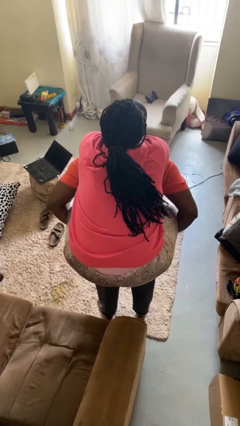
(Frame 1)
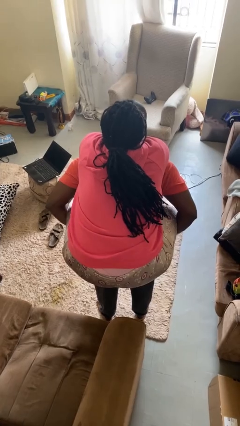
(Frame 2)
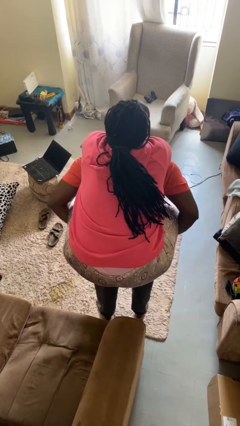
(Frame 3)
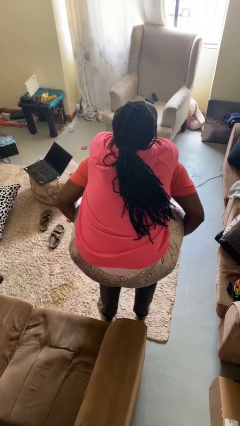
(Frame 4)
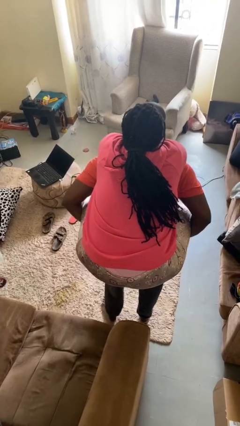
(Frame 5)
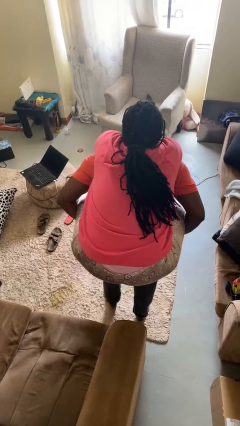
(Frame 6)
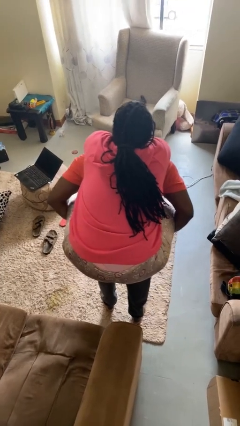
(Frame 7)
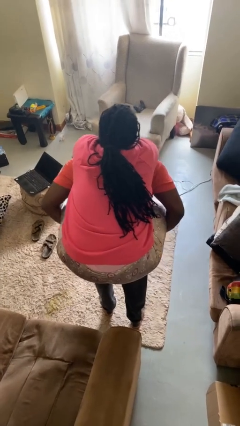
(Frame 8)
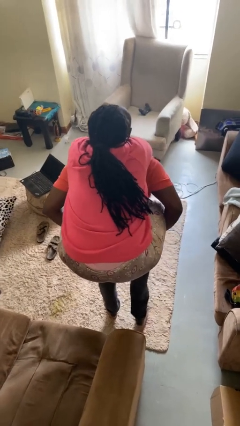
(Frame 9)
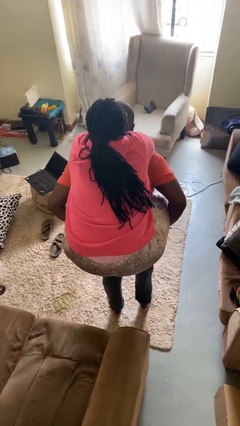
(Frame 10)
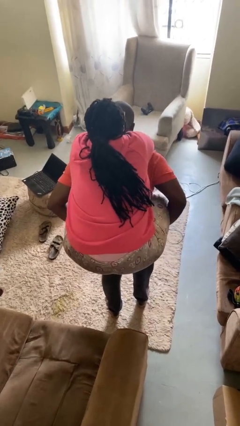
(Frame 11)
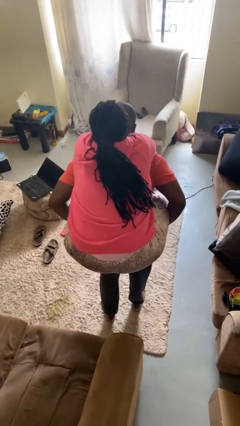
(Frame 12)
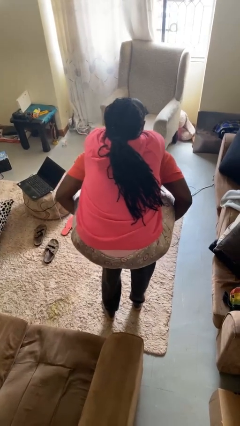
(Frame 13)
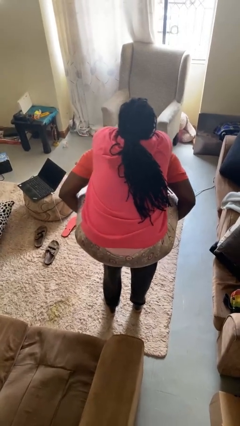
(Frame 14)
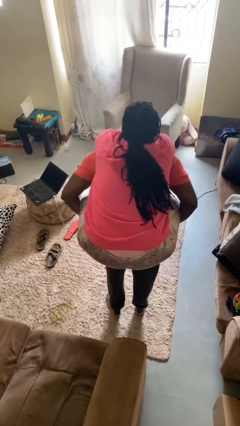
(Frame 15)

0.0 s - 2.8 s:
person carries person on back

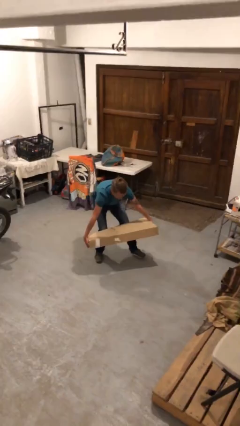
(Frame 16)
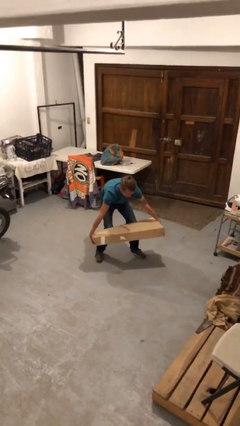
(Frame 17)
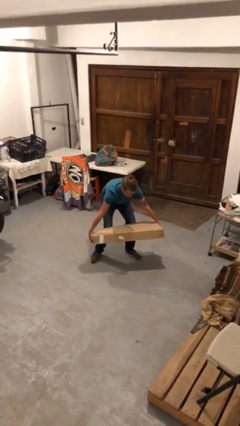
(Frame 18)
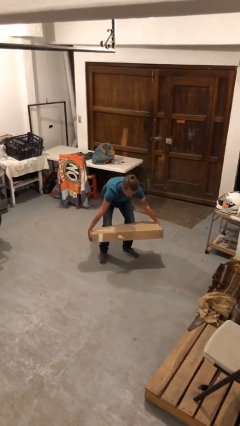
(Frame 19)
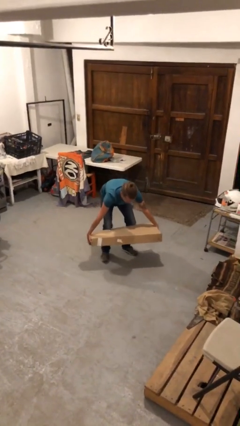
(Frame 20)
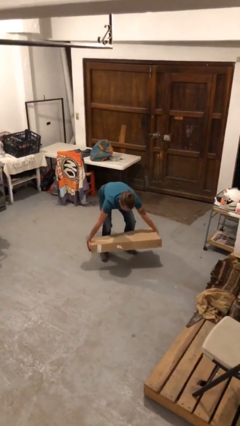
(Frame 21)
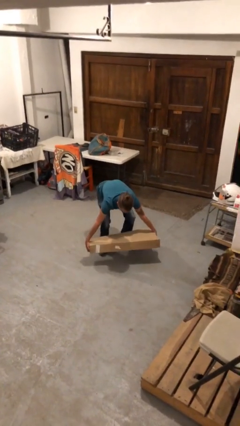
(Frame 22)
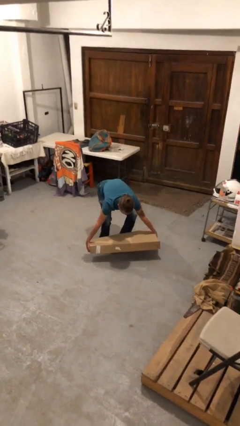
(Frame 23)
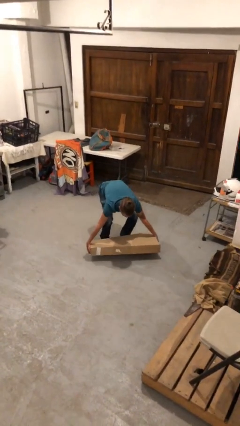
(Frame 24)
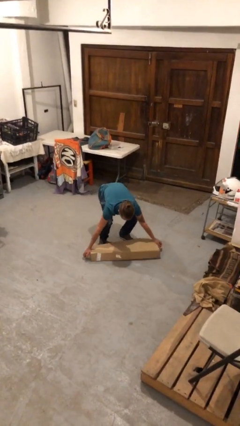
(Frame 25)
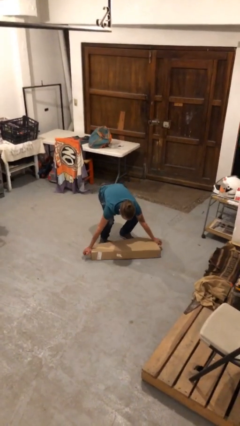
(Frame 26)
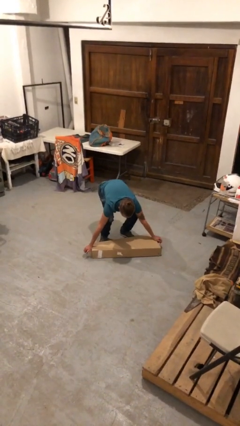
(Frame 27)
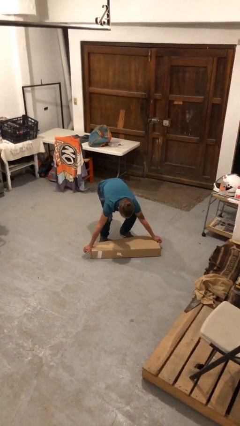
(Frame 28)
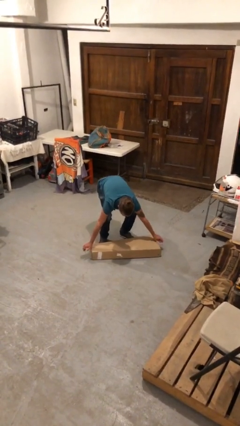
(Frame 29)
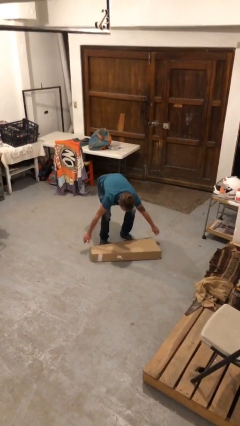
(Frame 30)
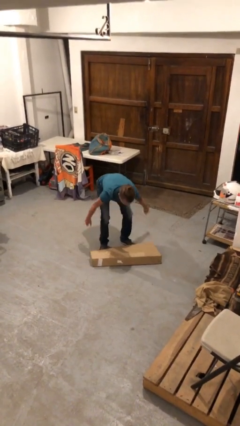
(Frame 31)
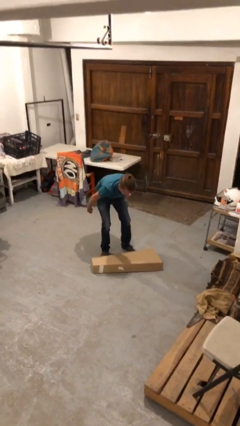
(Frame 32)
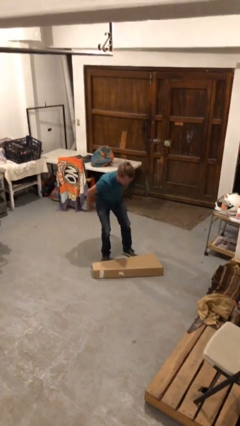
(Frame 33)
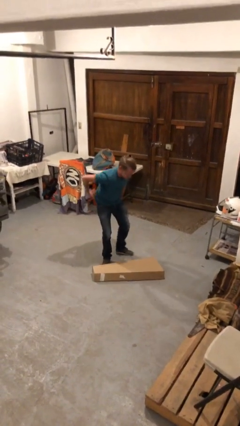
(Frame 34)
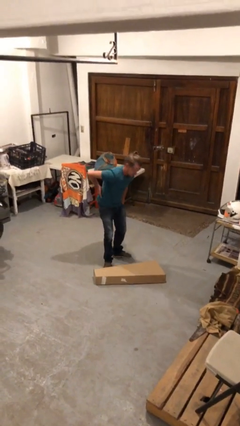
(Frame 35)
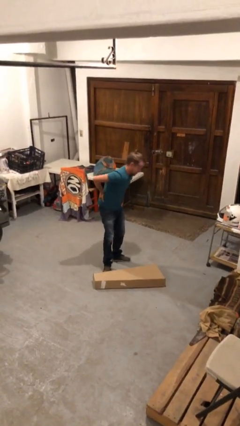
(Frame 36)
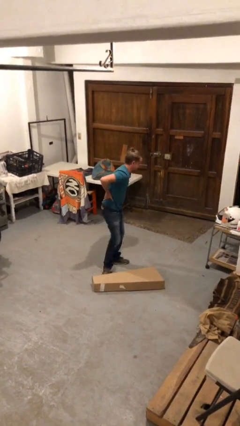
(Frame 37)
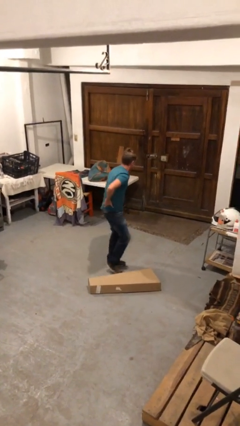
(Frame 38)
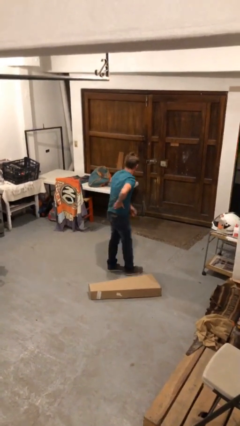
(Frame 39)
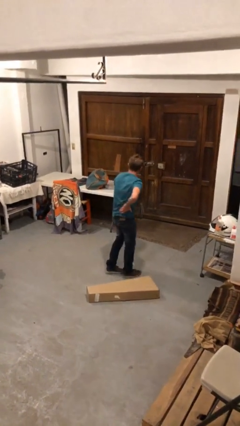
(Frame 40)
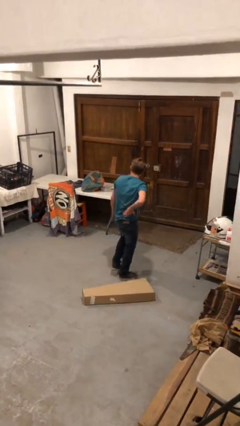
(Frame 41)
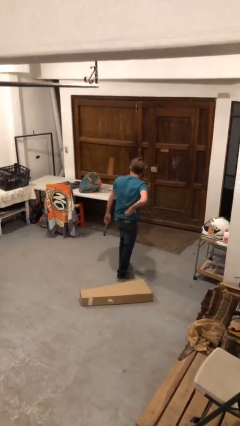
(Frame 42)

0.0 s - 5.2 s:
person puts down object on floor

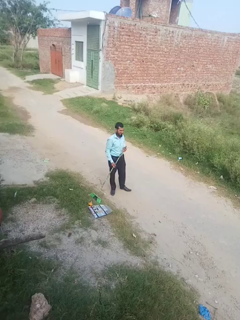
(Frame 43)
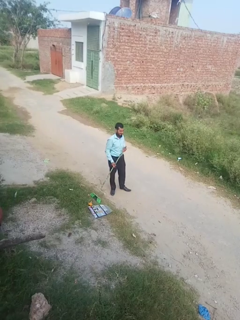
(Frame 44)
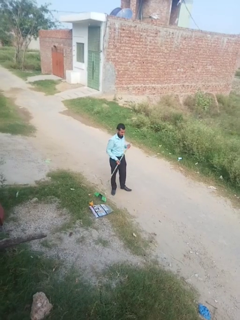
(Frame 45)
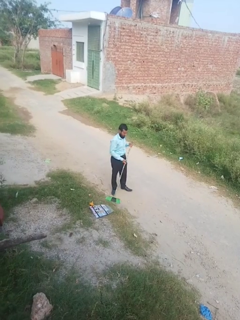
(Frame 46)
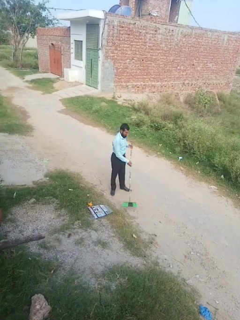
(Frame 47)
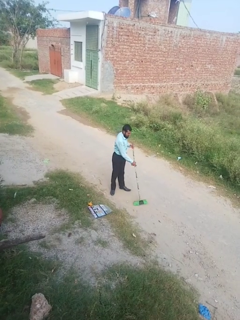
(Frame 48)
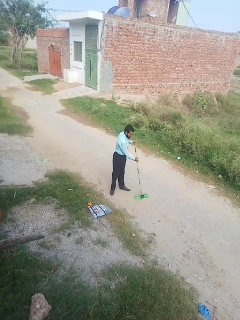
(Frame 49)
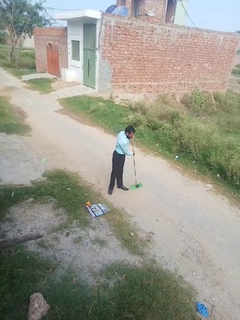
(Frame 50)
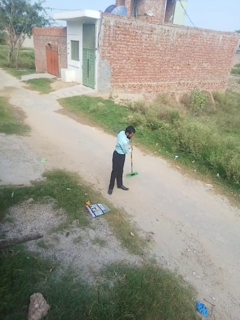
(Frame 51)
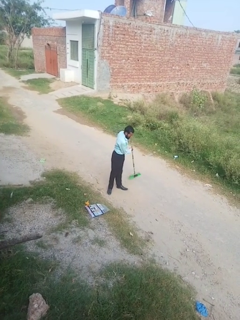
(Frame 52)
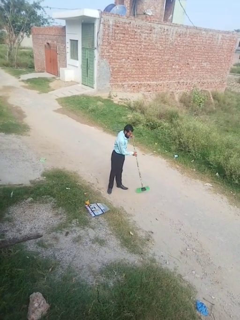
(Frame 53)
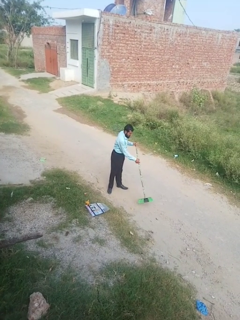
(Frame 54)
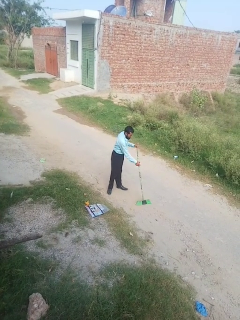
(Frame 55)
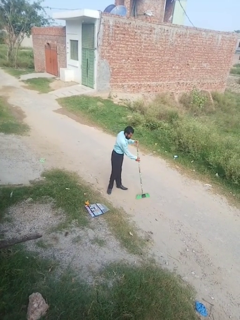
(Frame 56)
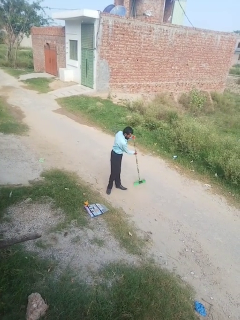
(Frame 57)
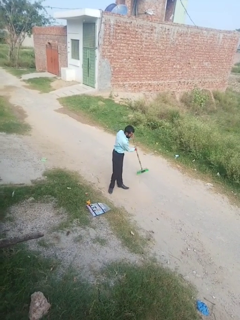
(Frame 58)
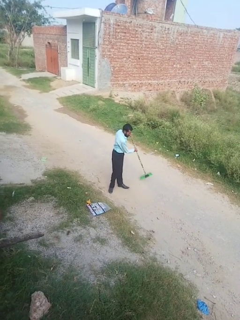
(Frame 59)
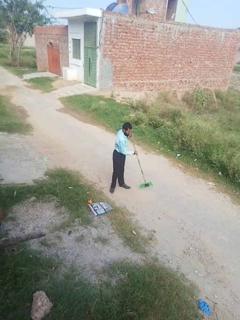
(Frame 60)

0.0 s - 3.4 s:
person sweeps floor

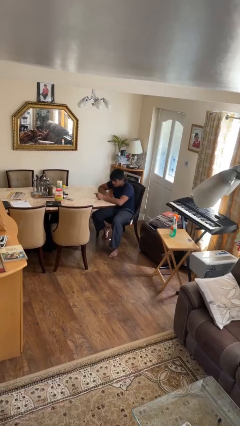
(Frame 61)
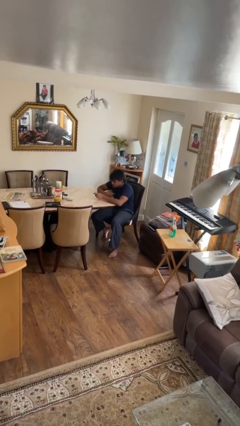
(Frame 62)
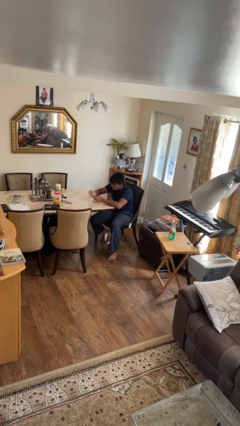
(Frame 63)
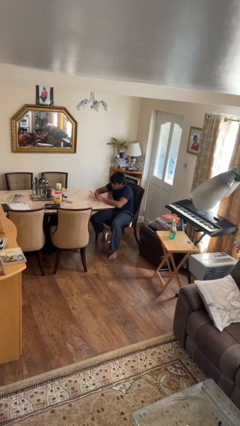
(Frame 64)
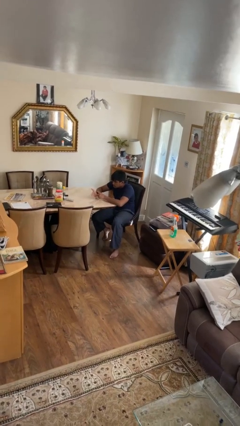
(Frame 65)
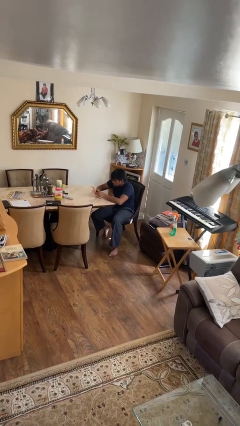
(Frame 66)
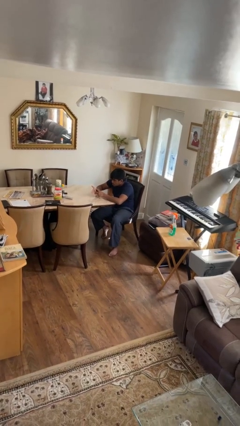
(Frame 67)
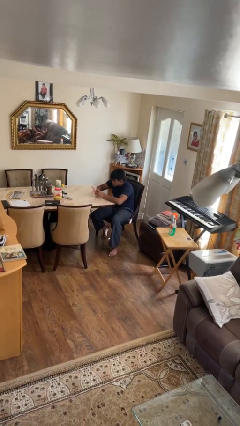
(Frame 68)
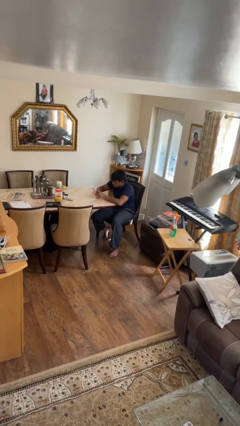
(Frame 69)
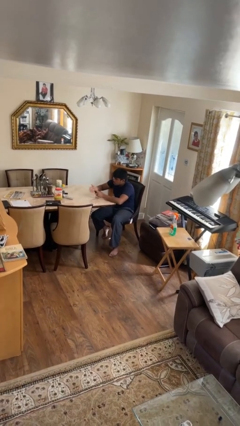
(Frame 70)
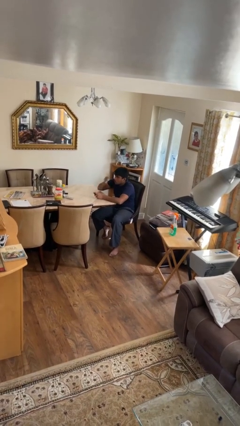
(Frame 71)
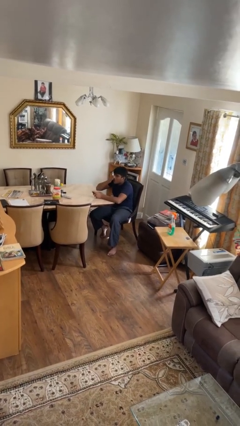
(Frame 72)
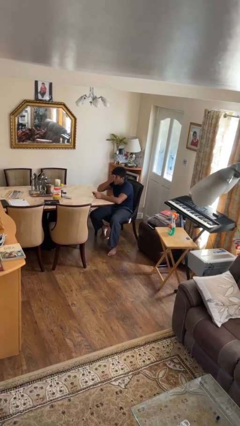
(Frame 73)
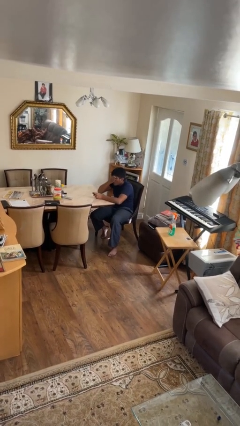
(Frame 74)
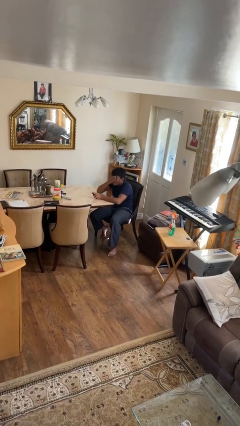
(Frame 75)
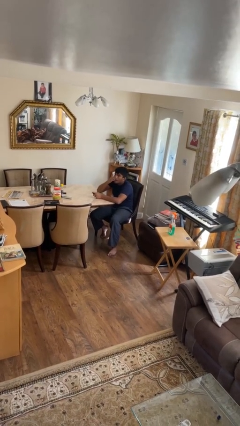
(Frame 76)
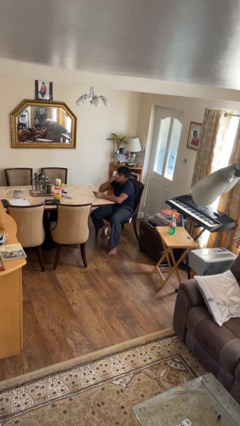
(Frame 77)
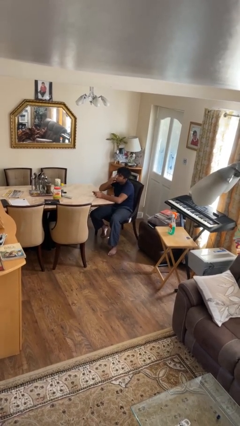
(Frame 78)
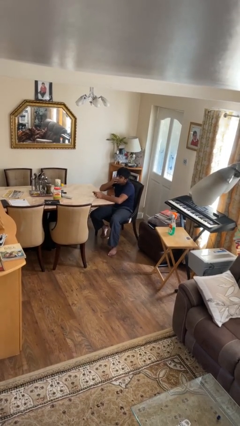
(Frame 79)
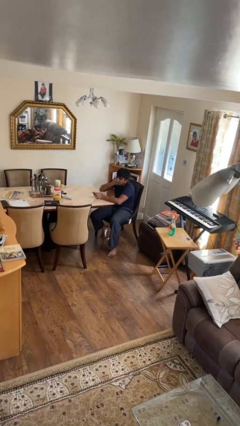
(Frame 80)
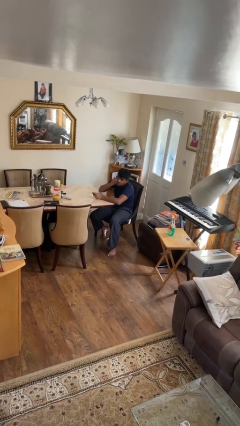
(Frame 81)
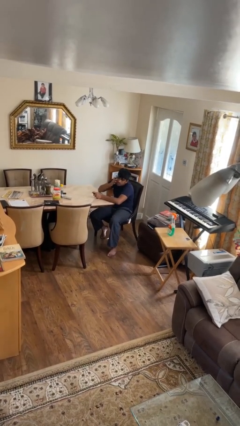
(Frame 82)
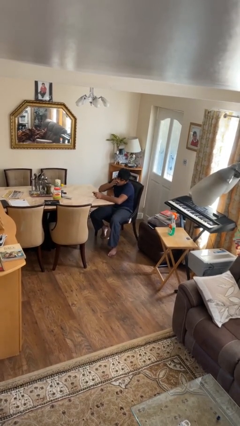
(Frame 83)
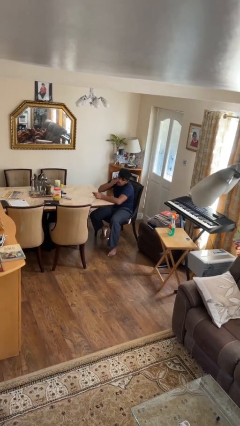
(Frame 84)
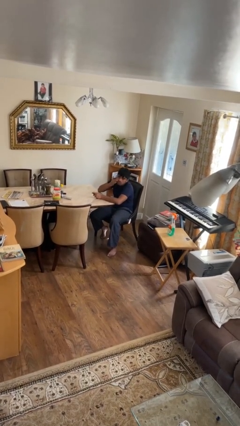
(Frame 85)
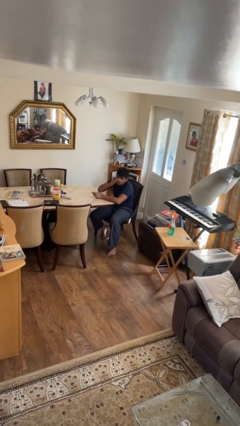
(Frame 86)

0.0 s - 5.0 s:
person applies foundation makeup

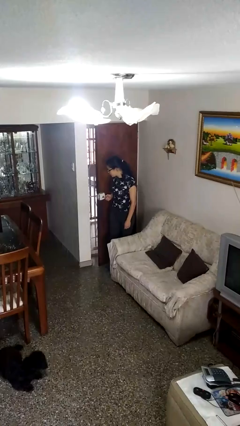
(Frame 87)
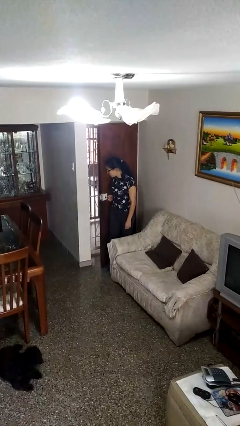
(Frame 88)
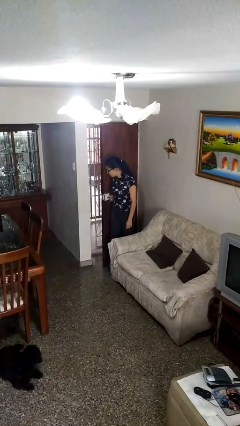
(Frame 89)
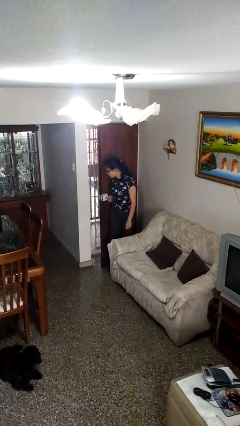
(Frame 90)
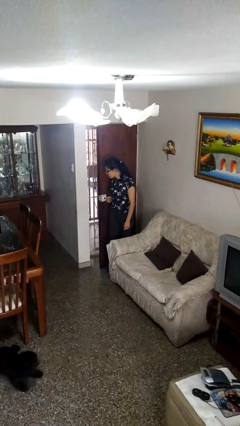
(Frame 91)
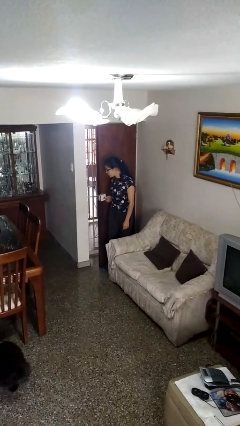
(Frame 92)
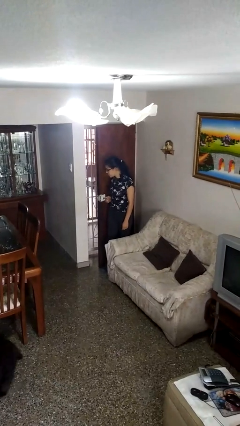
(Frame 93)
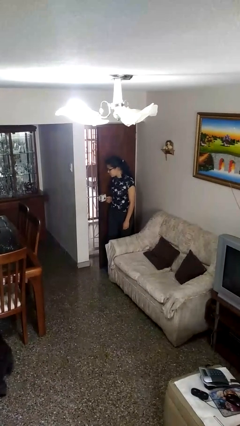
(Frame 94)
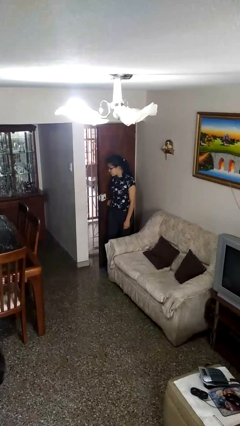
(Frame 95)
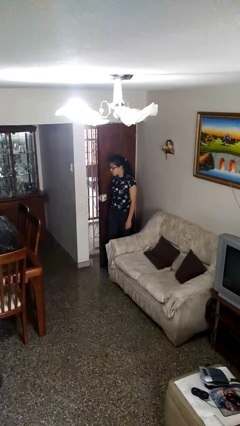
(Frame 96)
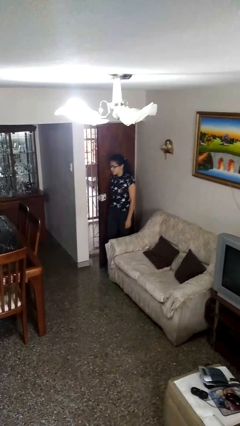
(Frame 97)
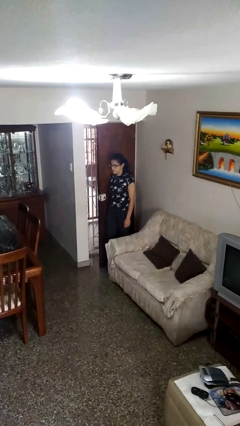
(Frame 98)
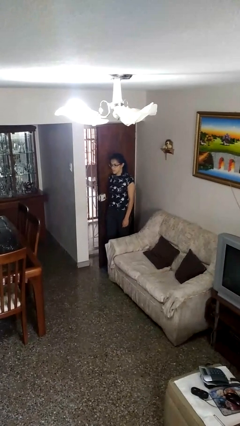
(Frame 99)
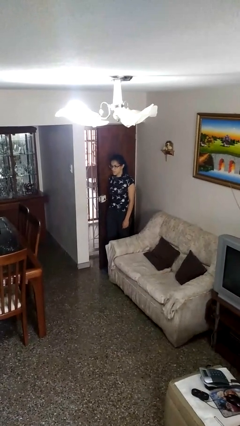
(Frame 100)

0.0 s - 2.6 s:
person opens facility door
